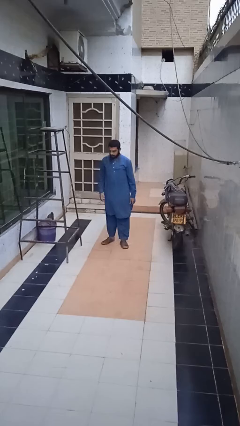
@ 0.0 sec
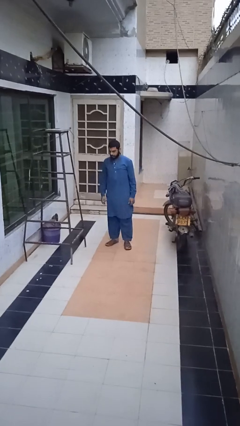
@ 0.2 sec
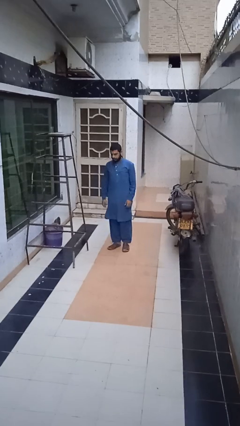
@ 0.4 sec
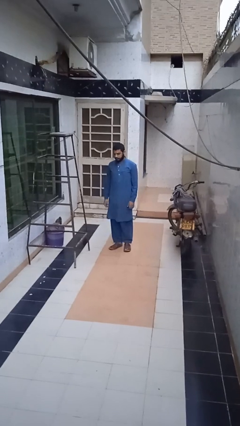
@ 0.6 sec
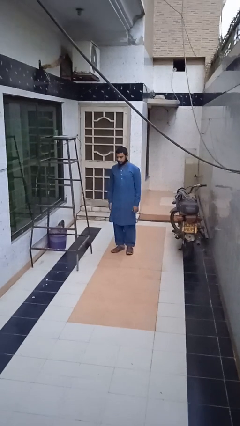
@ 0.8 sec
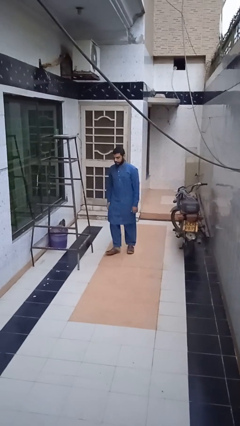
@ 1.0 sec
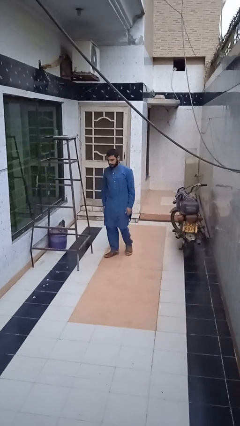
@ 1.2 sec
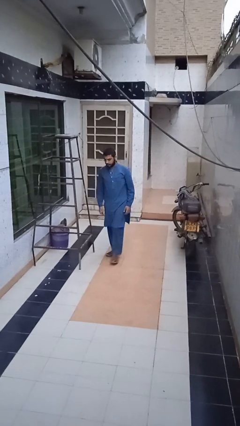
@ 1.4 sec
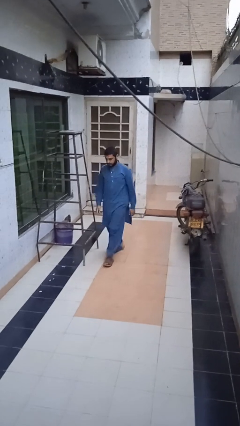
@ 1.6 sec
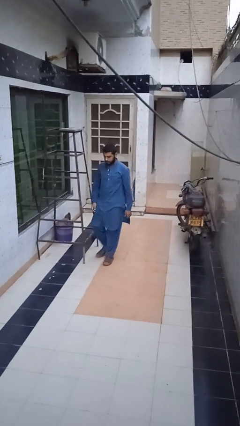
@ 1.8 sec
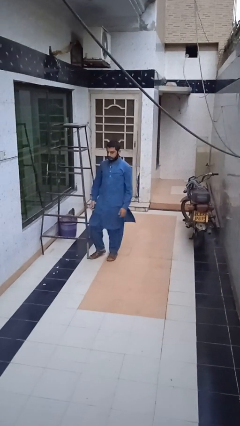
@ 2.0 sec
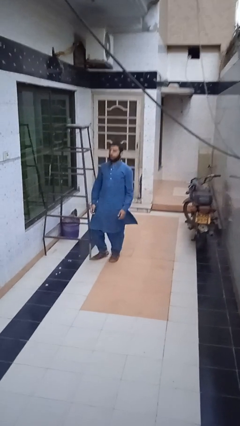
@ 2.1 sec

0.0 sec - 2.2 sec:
person trips on object on floor

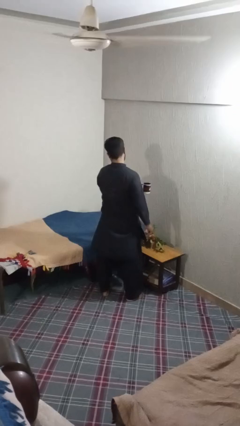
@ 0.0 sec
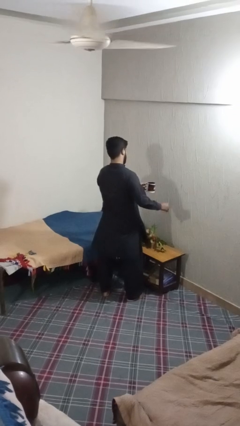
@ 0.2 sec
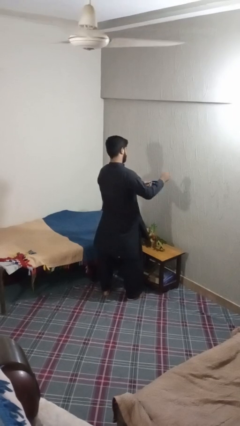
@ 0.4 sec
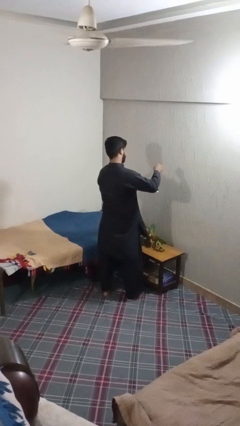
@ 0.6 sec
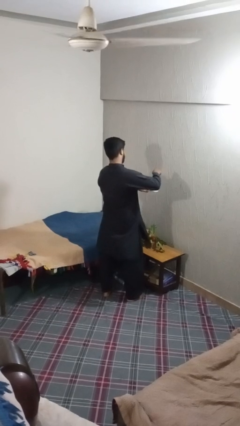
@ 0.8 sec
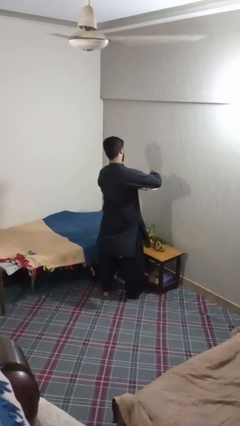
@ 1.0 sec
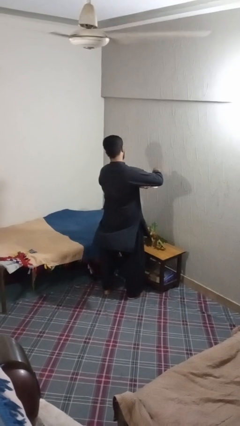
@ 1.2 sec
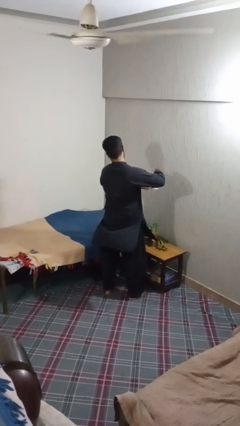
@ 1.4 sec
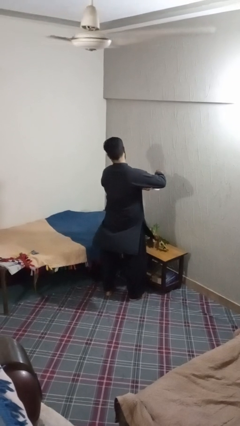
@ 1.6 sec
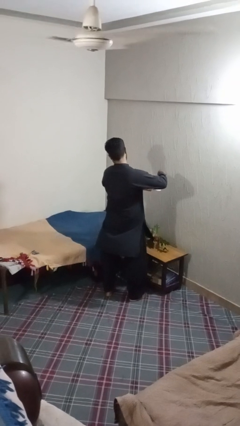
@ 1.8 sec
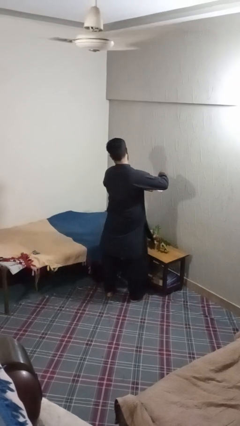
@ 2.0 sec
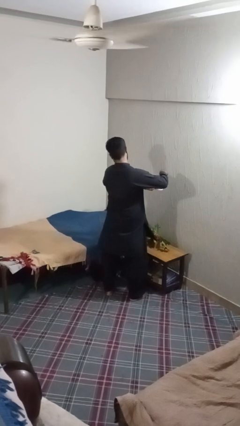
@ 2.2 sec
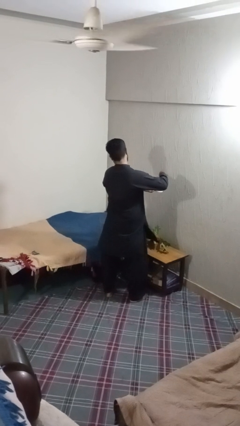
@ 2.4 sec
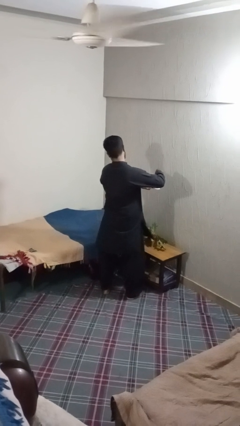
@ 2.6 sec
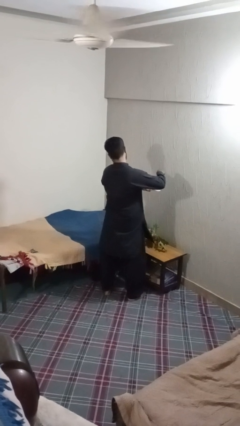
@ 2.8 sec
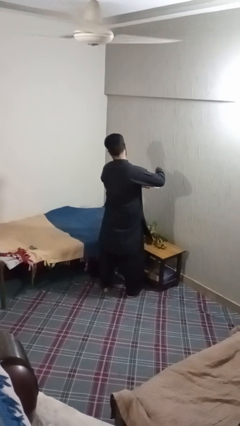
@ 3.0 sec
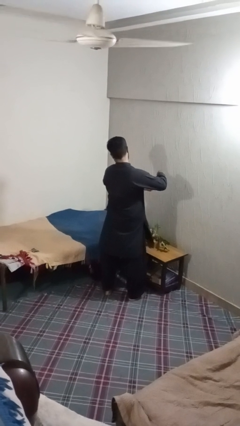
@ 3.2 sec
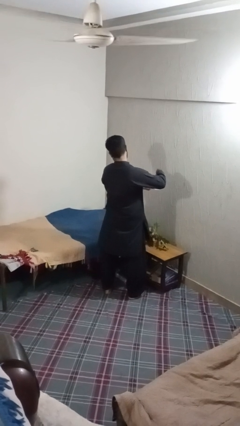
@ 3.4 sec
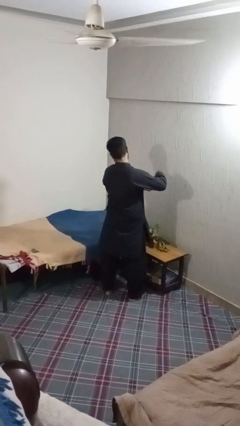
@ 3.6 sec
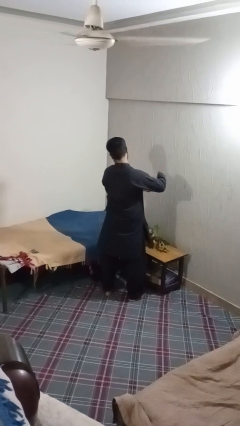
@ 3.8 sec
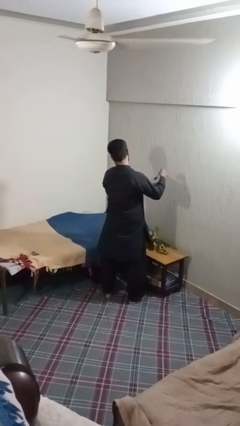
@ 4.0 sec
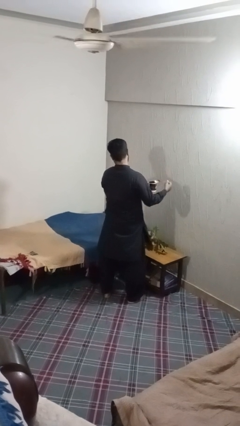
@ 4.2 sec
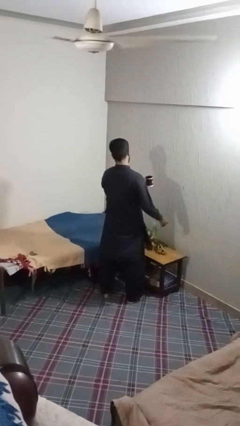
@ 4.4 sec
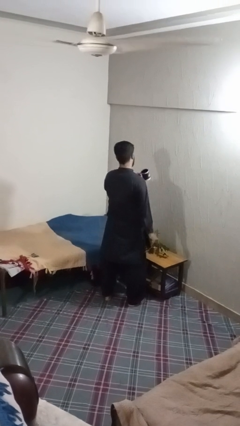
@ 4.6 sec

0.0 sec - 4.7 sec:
person stirs mug

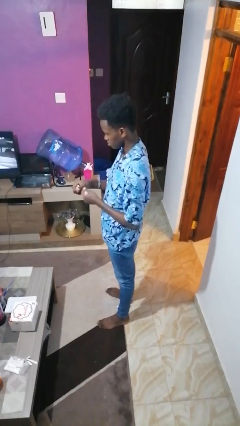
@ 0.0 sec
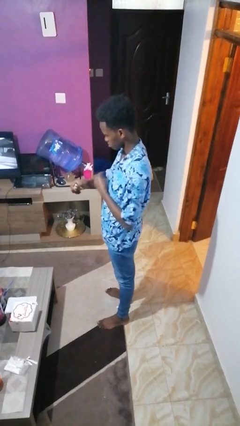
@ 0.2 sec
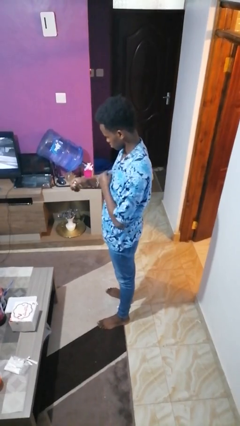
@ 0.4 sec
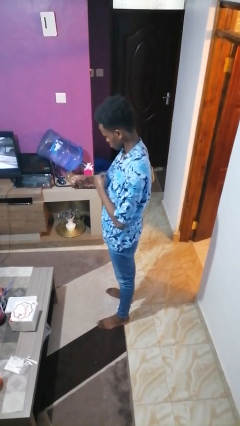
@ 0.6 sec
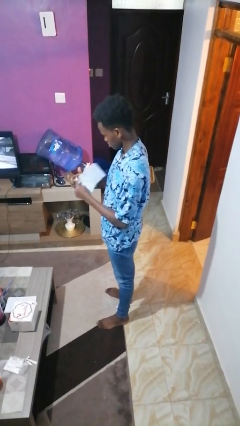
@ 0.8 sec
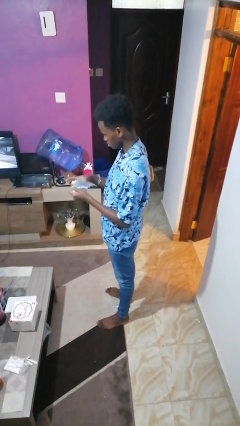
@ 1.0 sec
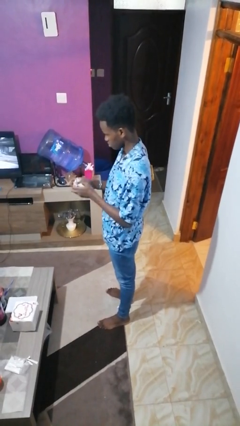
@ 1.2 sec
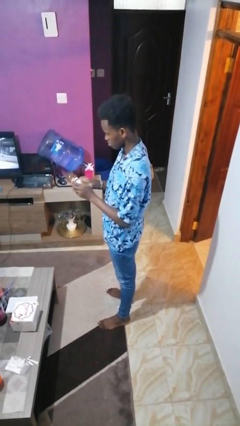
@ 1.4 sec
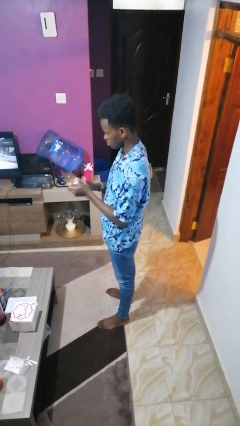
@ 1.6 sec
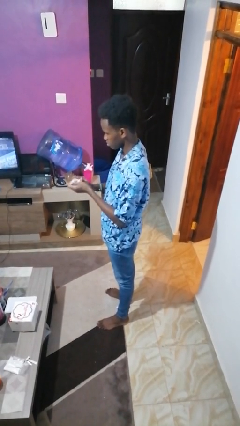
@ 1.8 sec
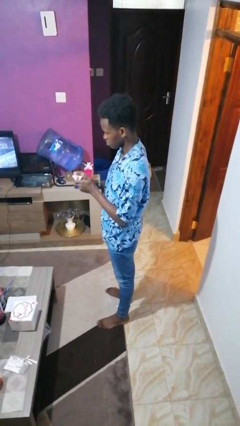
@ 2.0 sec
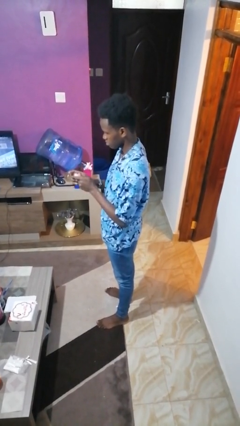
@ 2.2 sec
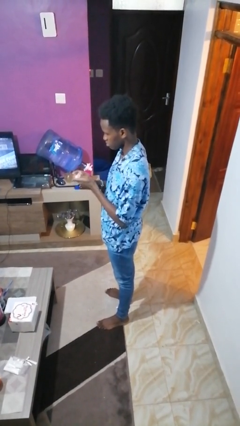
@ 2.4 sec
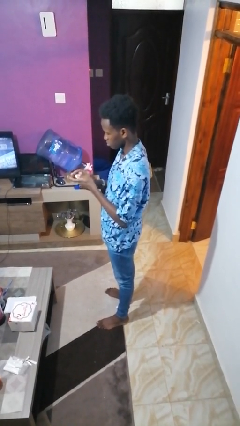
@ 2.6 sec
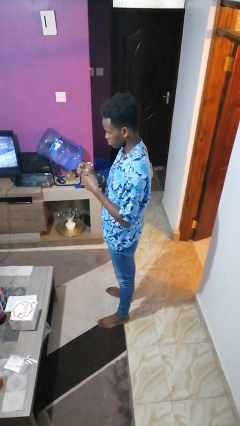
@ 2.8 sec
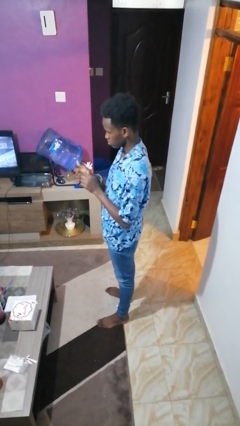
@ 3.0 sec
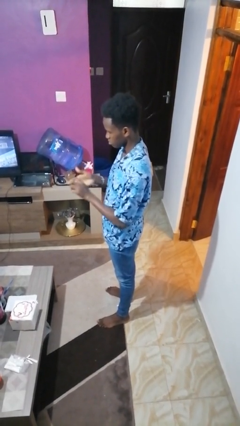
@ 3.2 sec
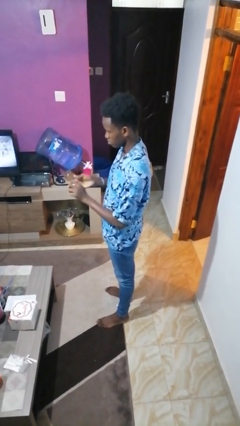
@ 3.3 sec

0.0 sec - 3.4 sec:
person crumples paper

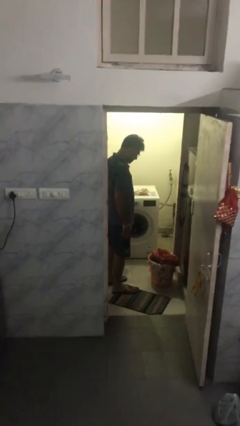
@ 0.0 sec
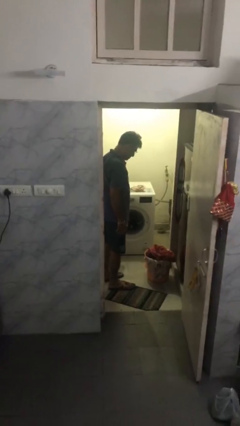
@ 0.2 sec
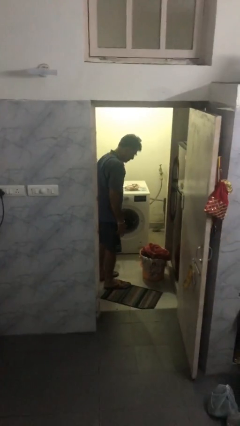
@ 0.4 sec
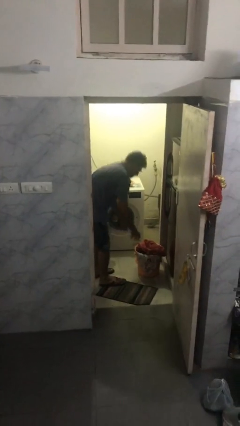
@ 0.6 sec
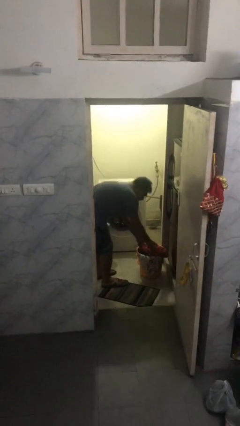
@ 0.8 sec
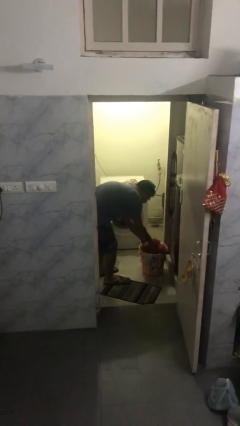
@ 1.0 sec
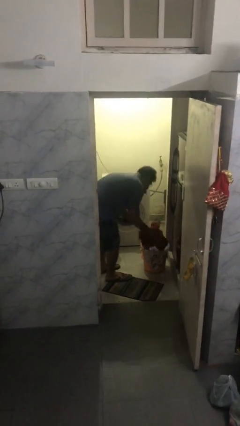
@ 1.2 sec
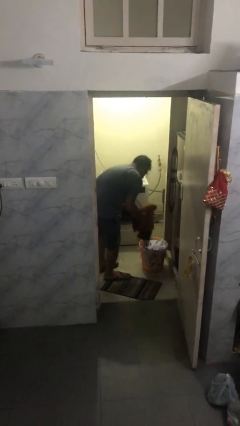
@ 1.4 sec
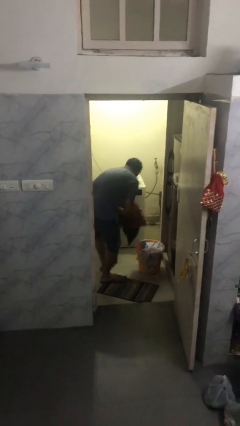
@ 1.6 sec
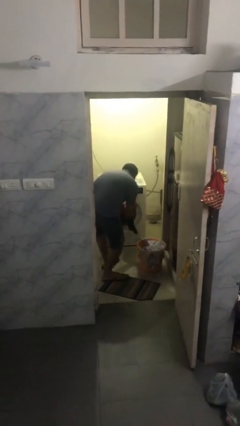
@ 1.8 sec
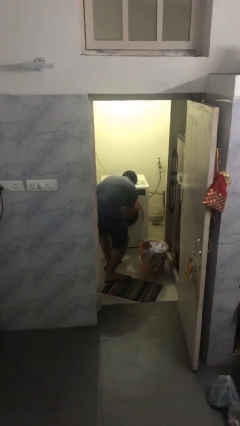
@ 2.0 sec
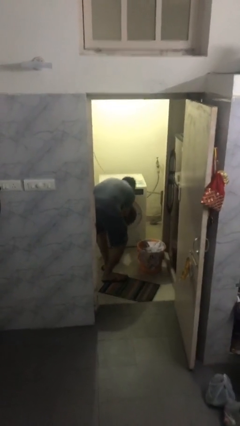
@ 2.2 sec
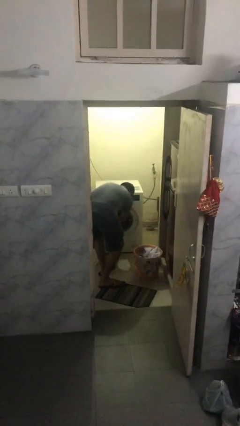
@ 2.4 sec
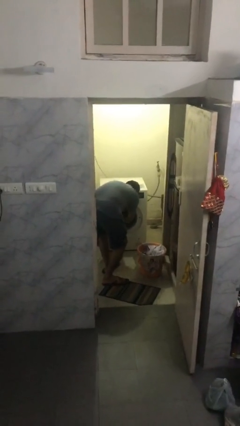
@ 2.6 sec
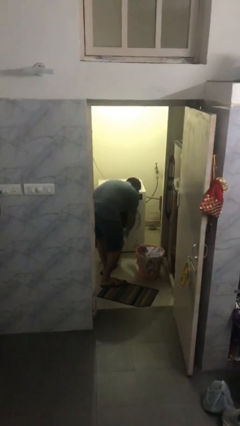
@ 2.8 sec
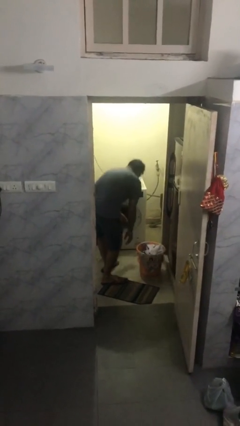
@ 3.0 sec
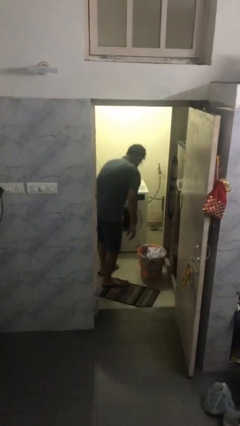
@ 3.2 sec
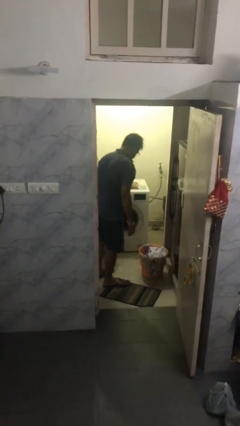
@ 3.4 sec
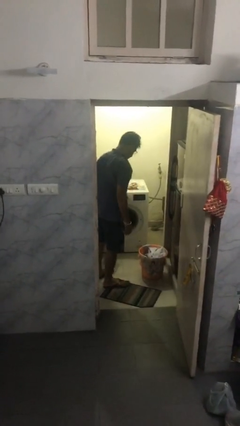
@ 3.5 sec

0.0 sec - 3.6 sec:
person loads dryer

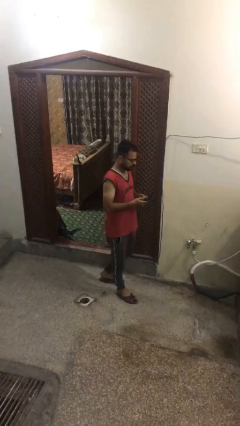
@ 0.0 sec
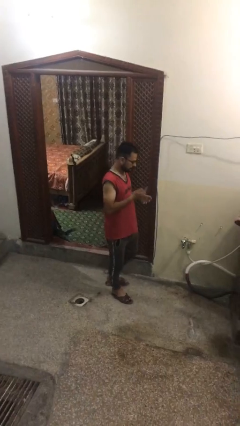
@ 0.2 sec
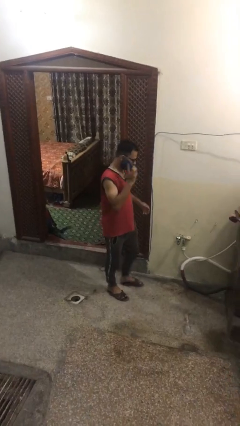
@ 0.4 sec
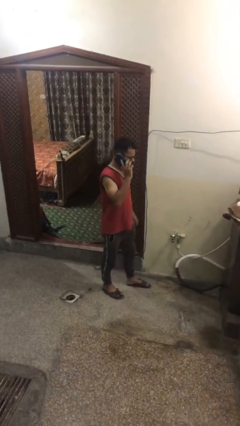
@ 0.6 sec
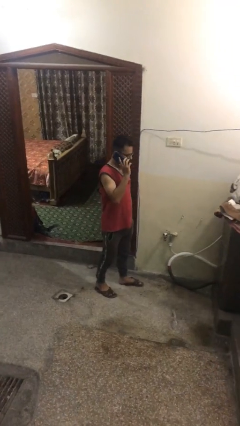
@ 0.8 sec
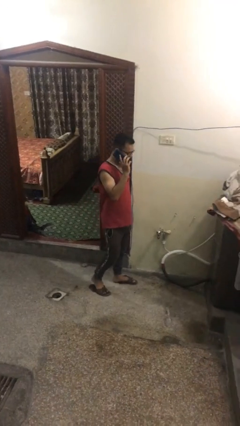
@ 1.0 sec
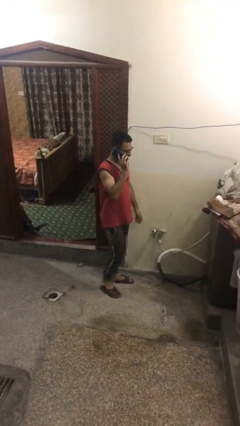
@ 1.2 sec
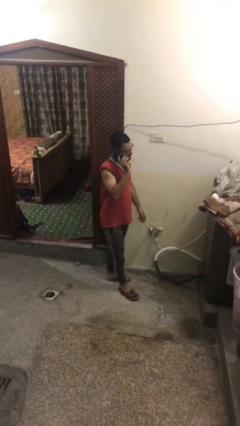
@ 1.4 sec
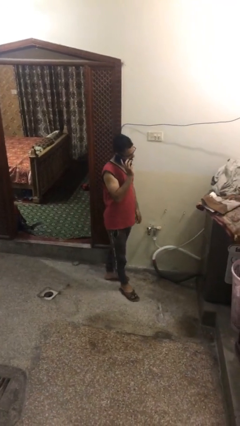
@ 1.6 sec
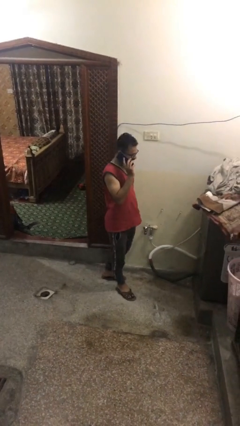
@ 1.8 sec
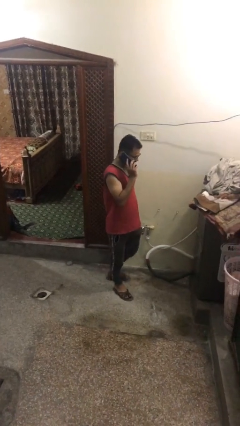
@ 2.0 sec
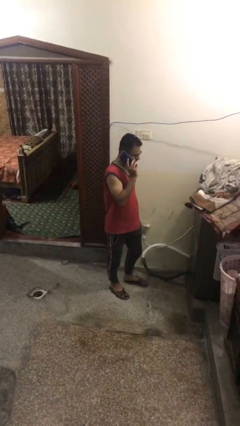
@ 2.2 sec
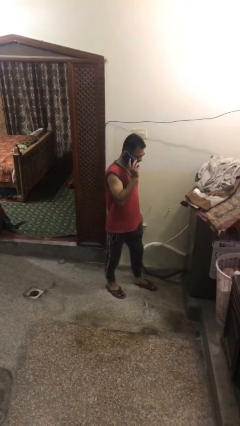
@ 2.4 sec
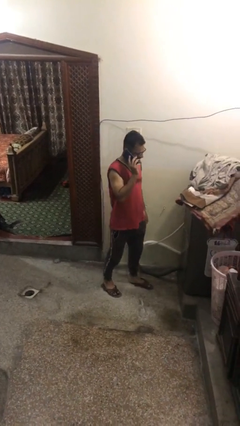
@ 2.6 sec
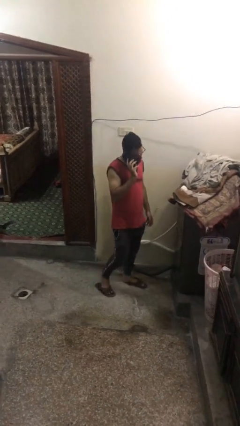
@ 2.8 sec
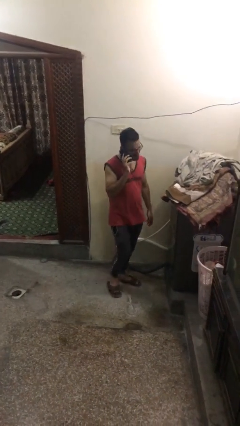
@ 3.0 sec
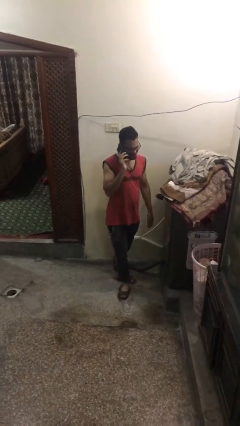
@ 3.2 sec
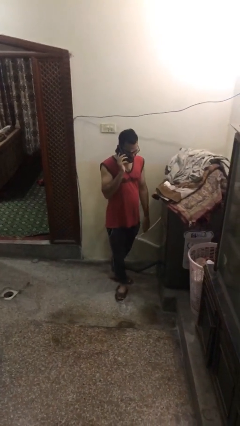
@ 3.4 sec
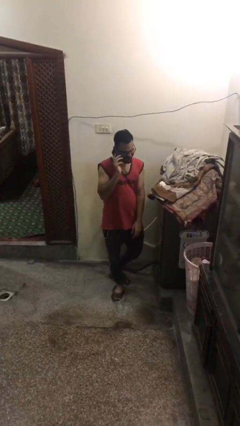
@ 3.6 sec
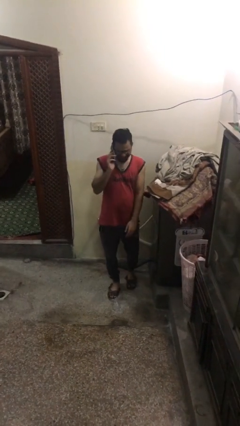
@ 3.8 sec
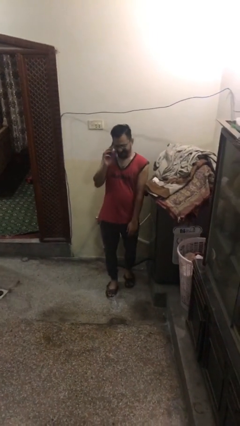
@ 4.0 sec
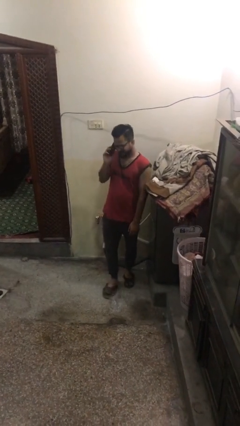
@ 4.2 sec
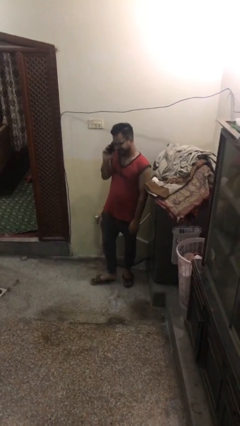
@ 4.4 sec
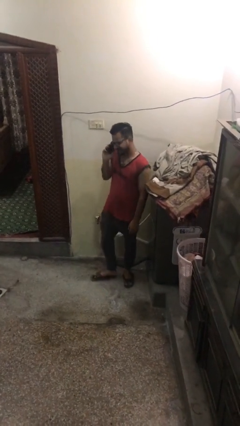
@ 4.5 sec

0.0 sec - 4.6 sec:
person talks on phone
